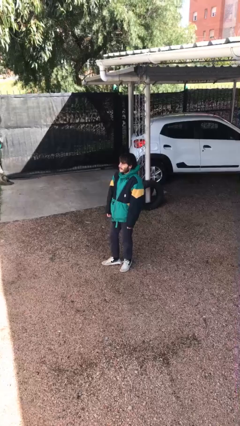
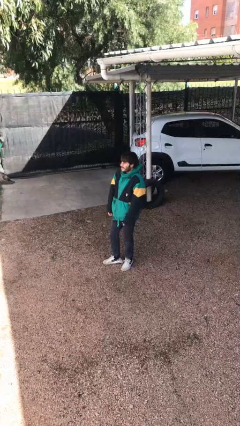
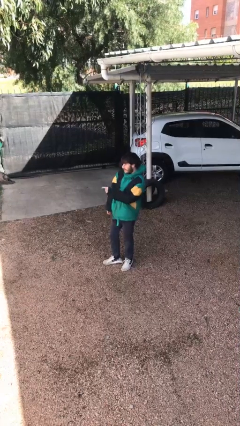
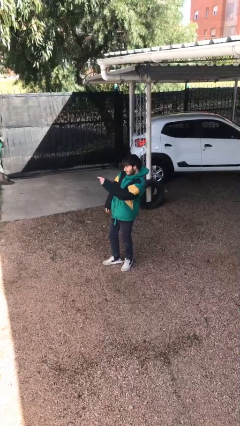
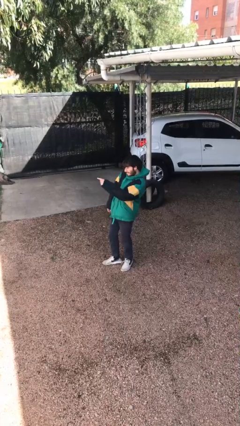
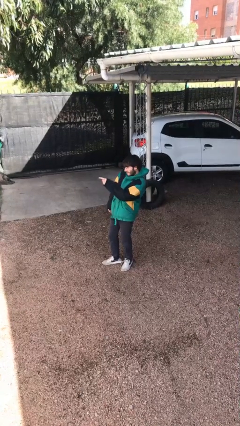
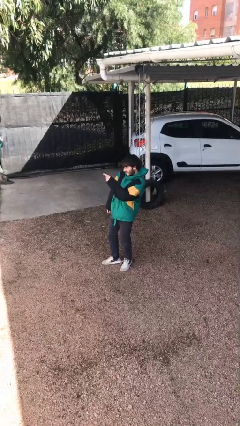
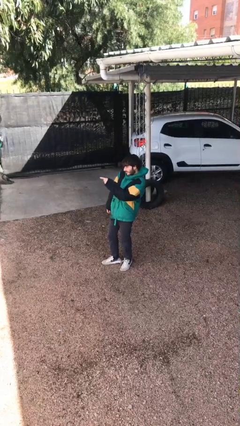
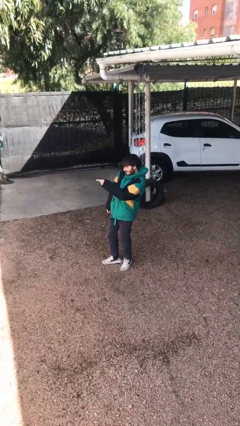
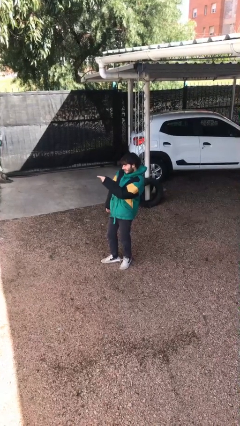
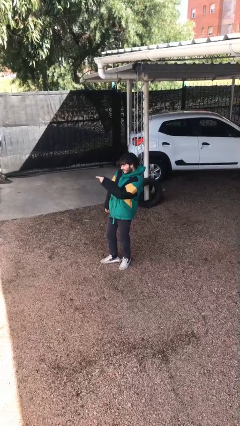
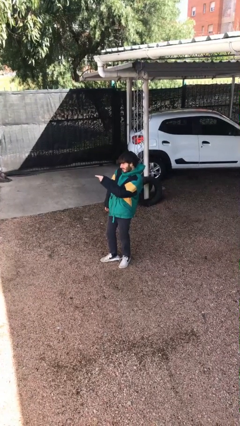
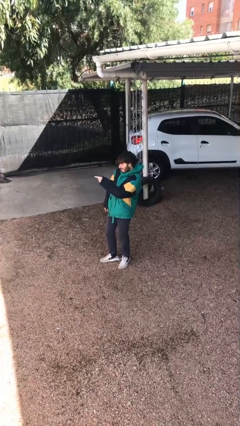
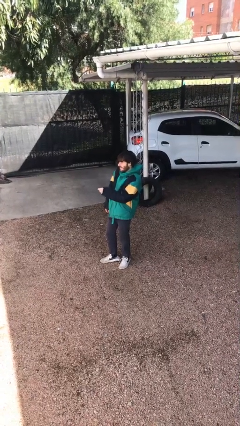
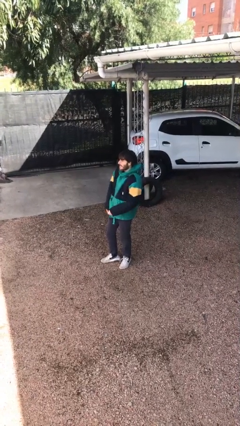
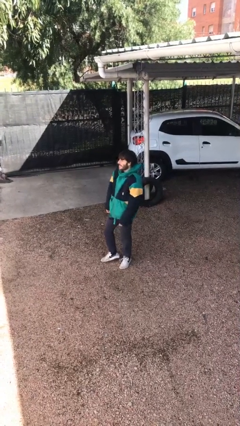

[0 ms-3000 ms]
person points at person

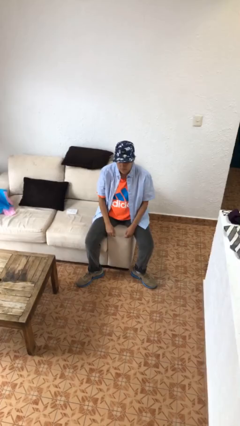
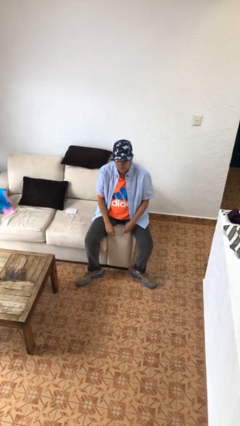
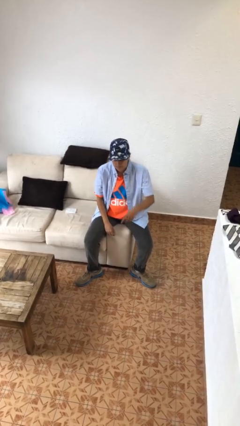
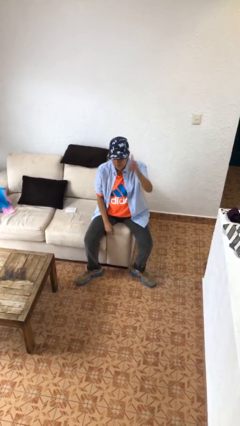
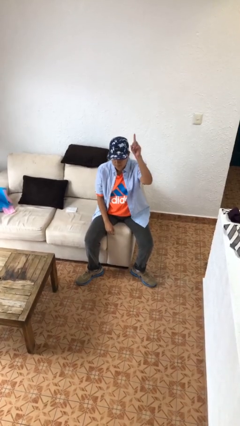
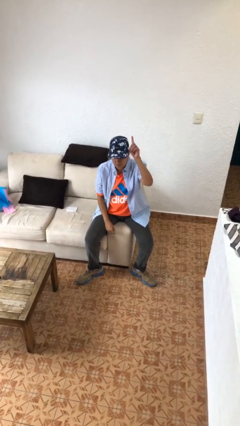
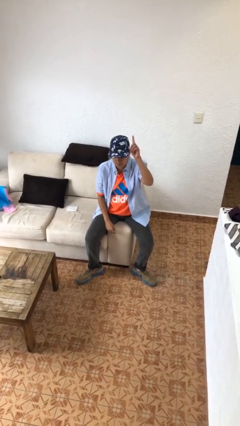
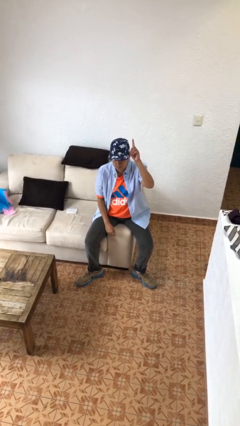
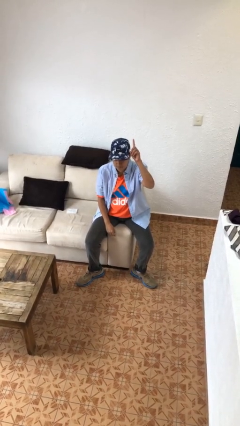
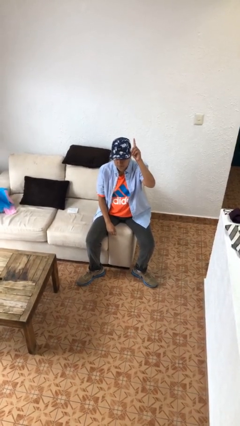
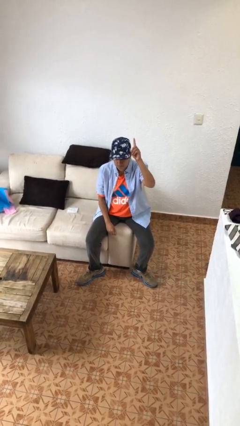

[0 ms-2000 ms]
person gestures number one

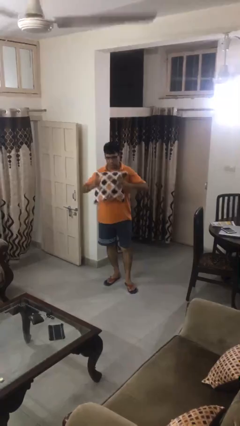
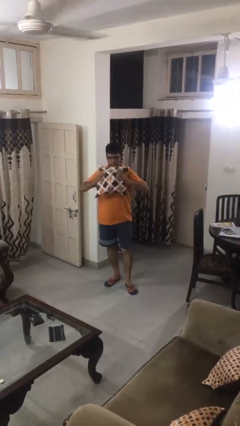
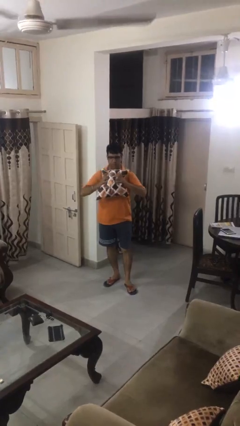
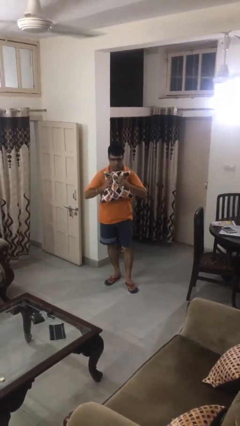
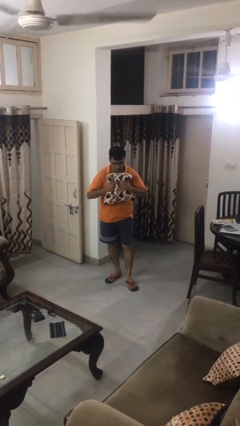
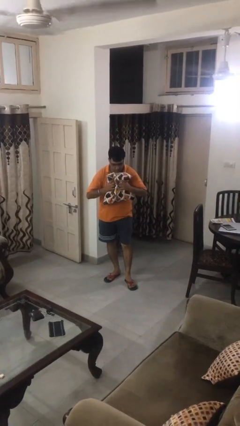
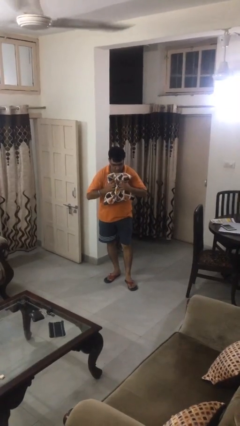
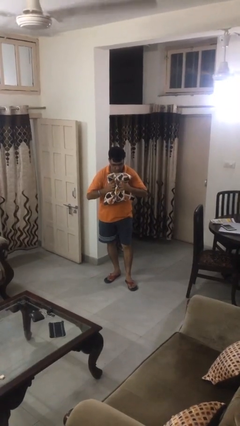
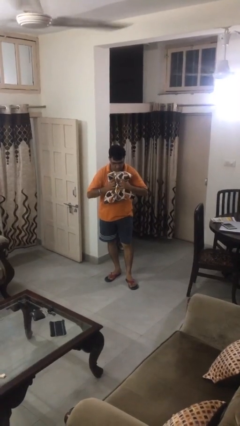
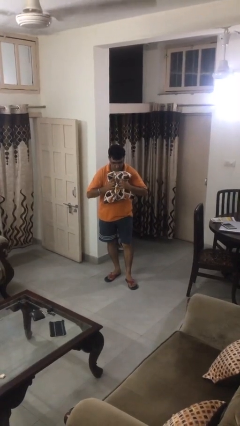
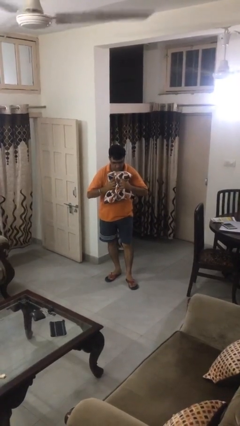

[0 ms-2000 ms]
person squeezes object

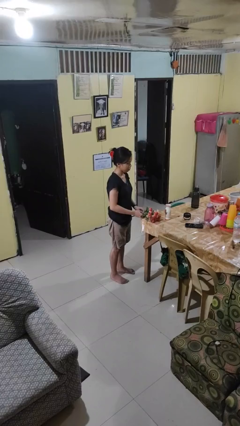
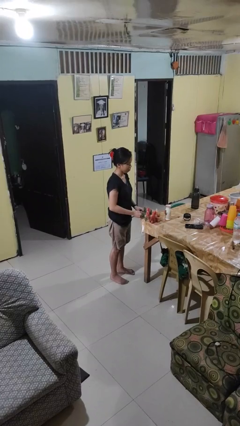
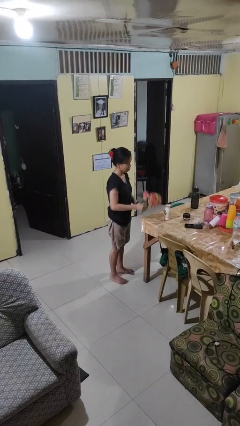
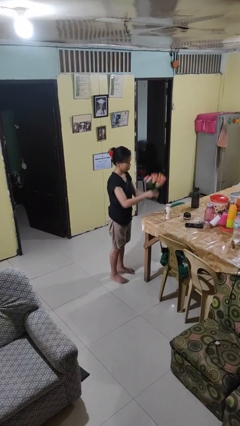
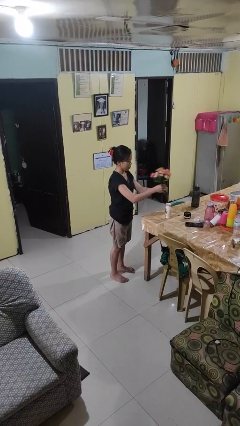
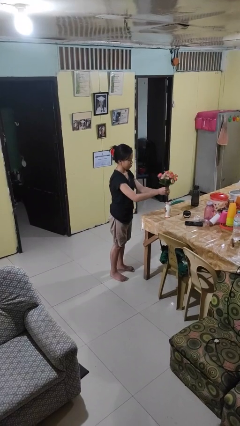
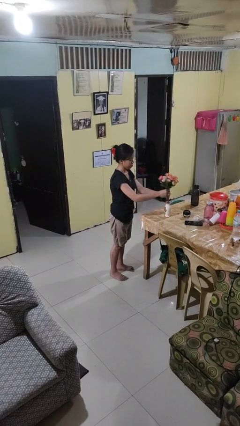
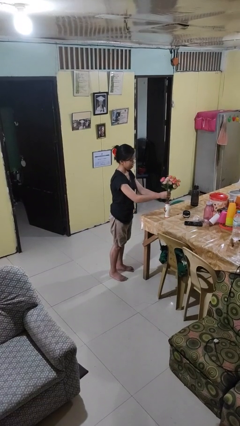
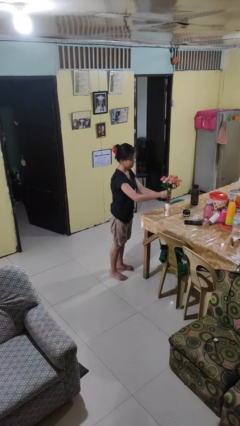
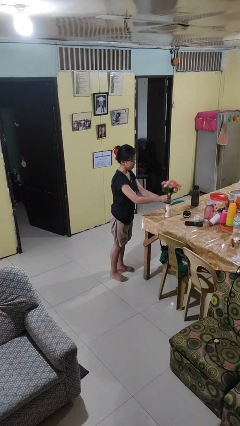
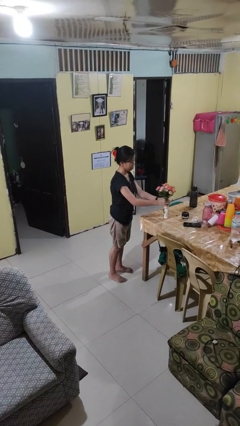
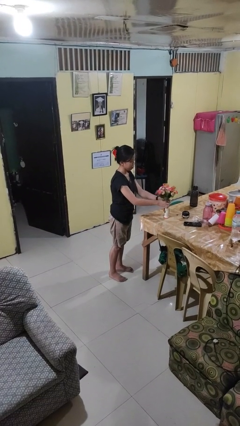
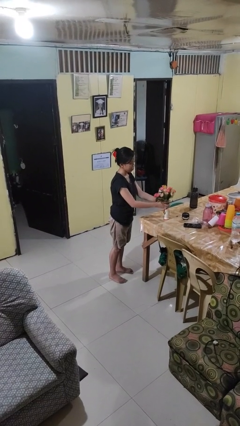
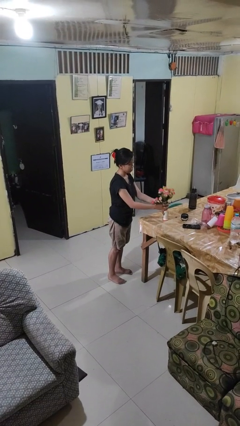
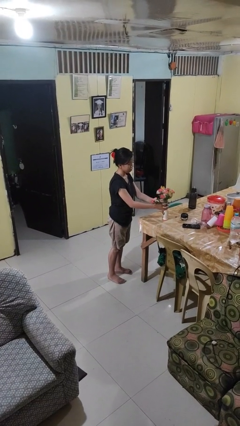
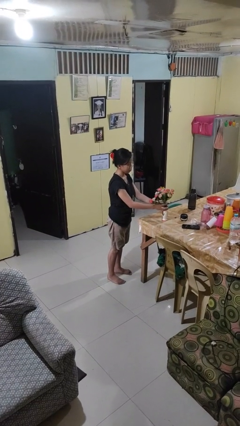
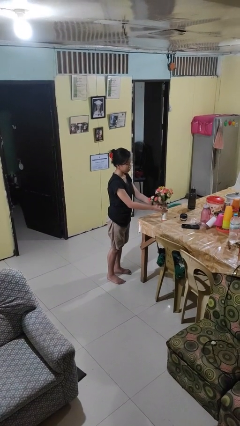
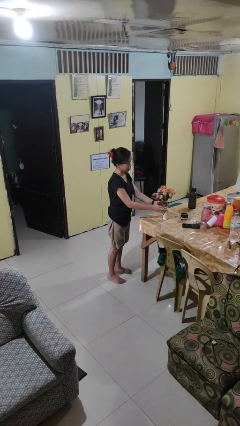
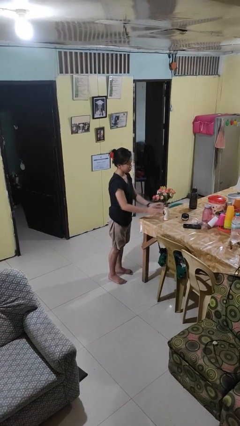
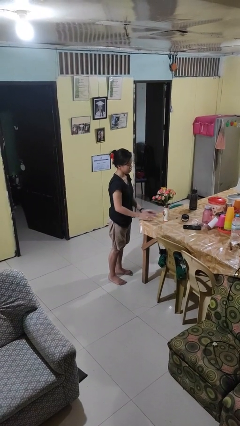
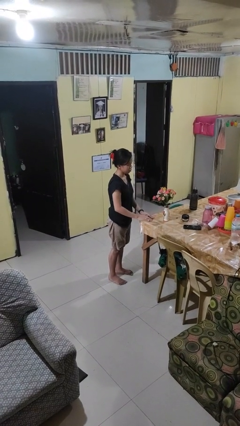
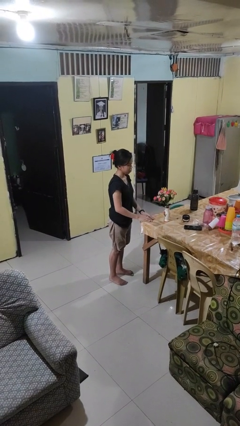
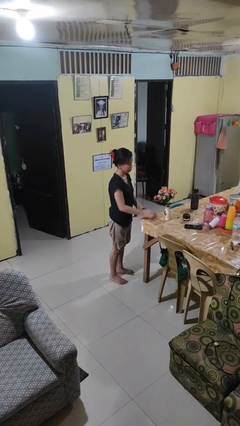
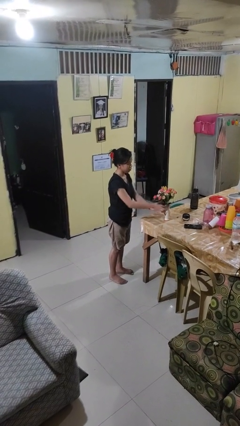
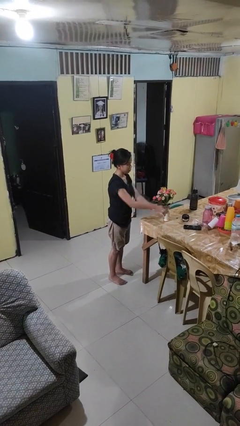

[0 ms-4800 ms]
person arranges flowers in vase

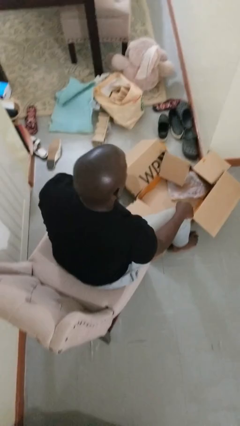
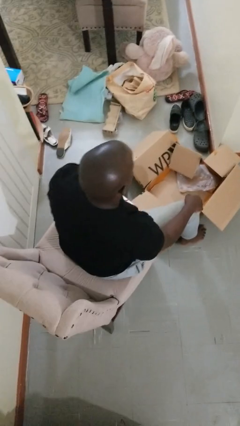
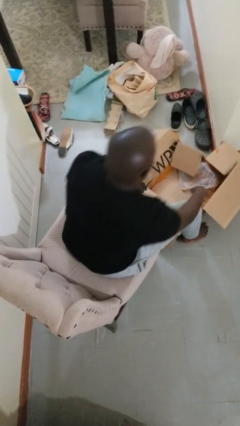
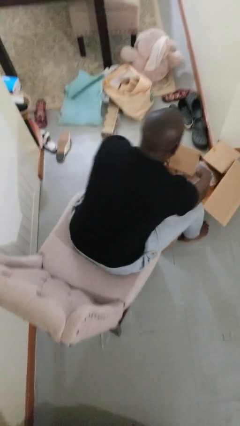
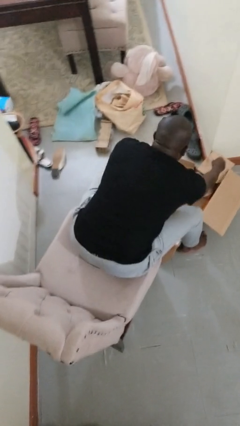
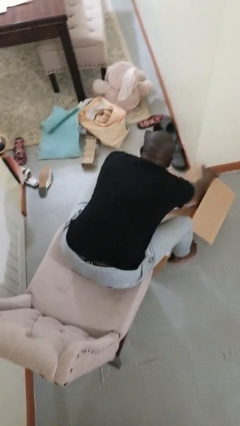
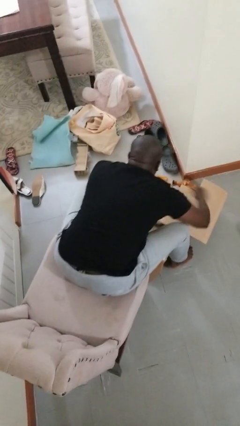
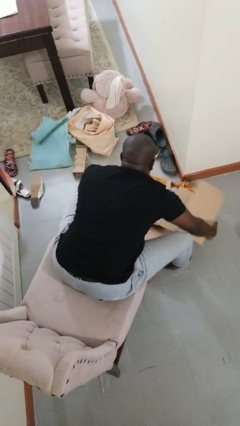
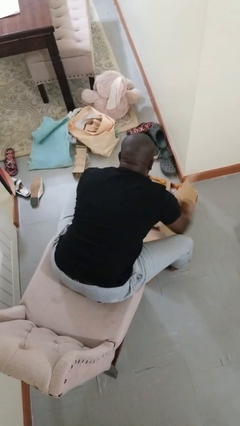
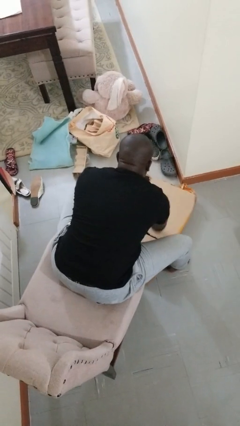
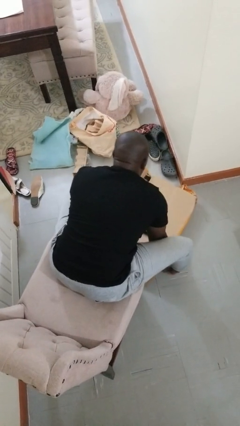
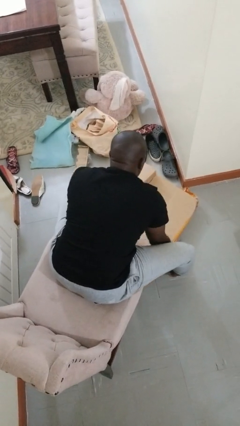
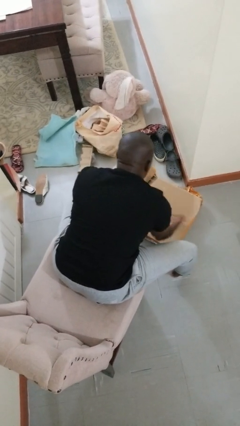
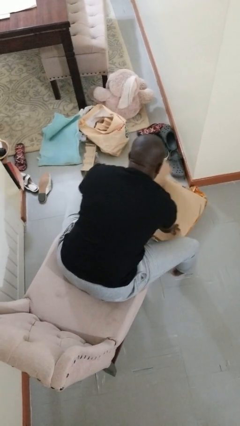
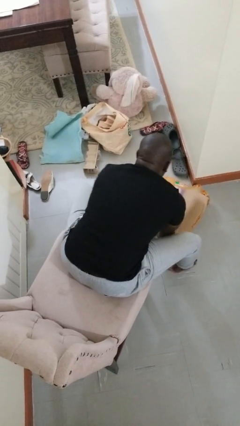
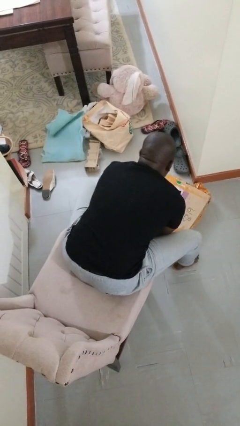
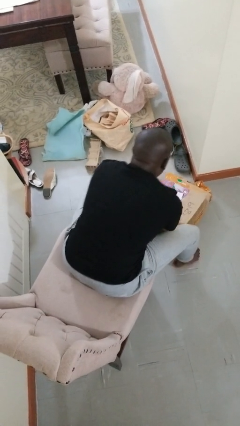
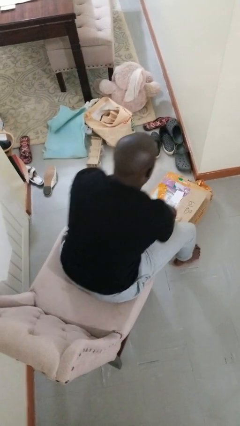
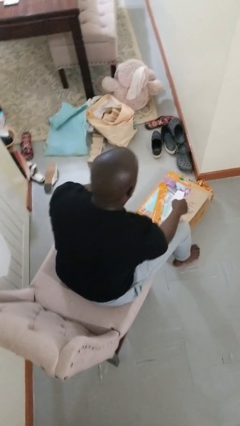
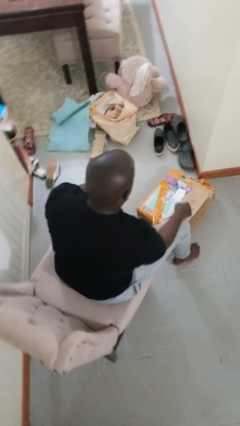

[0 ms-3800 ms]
person closes box

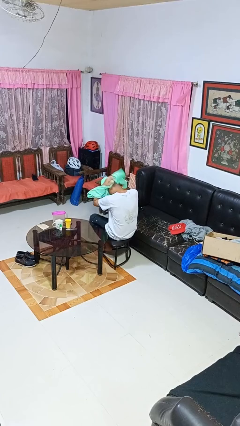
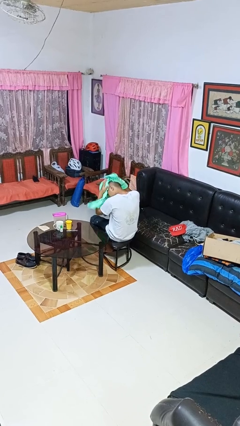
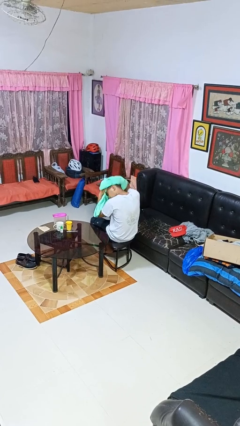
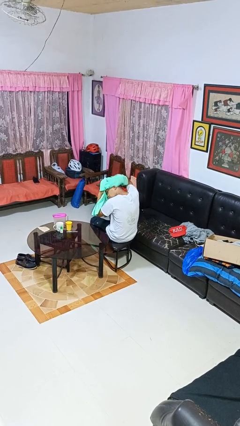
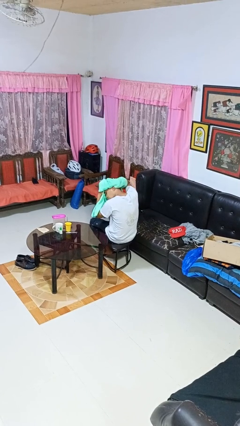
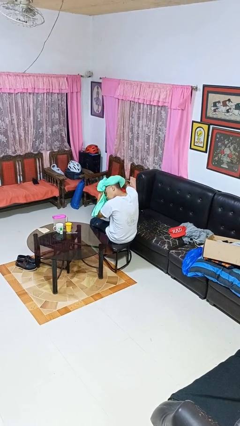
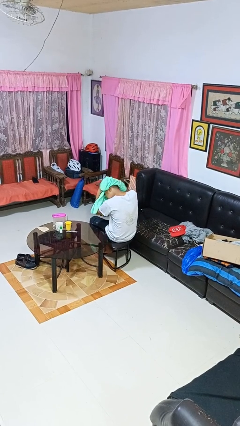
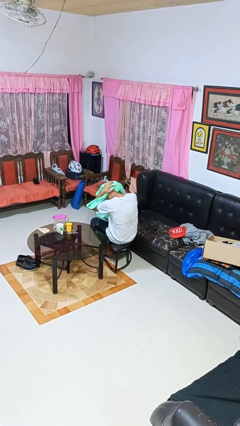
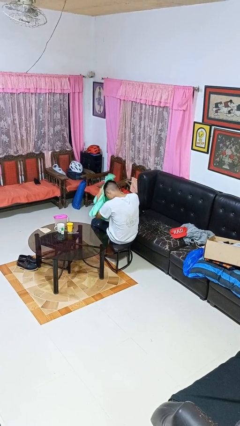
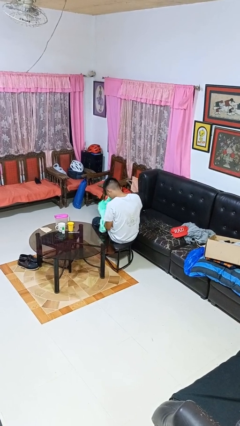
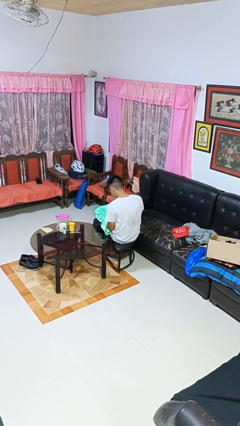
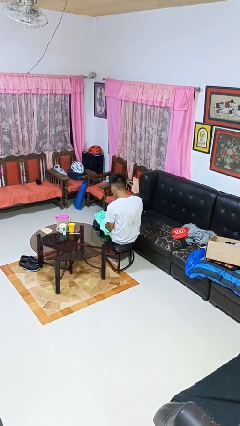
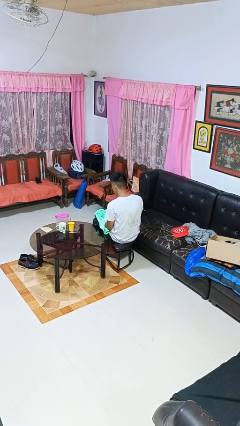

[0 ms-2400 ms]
person dries hair with towel
